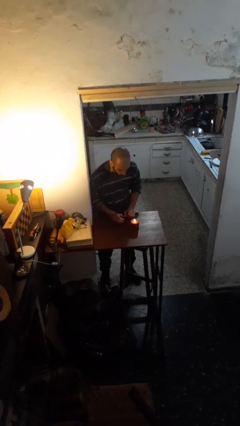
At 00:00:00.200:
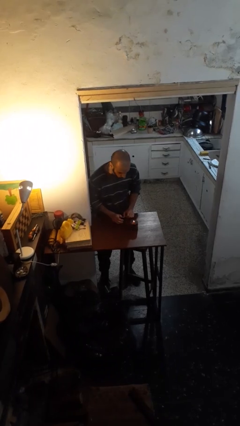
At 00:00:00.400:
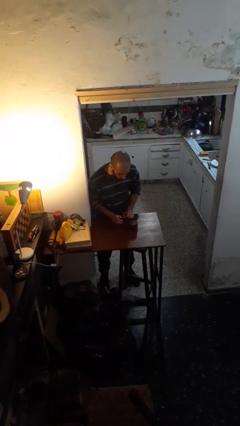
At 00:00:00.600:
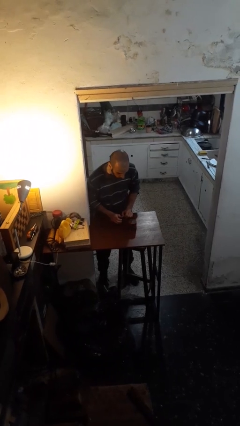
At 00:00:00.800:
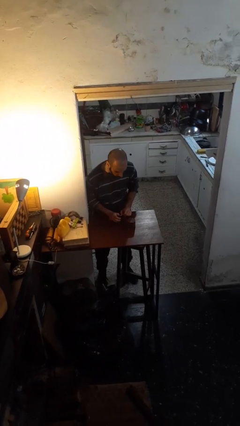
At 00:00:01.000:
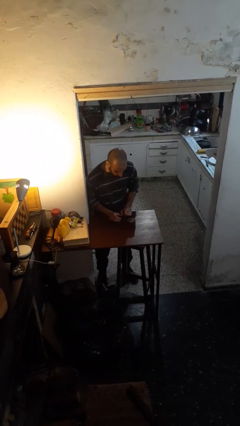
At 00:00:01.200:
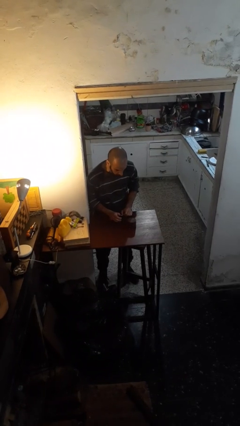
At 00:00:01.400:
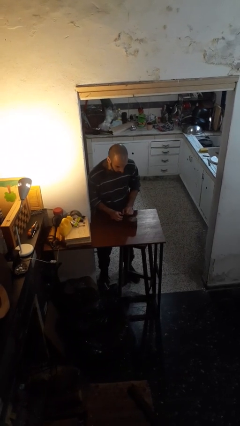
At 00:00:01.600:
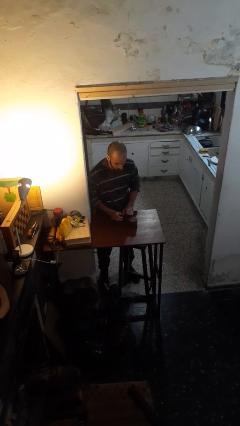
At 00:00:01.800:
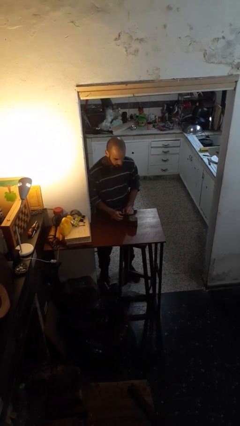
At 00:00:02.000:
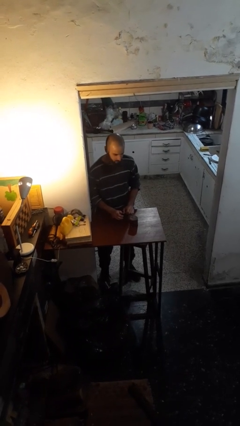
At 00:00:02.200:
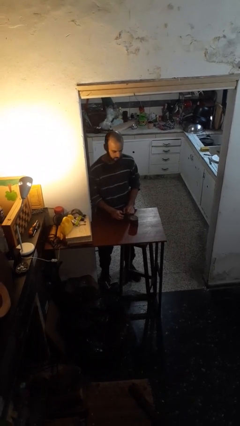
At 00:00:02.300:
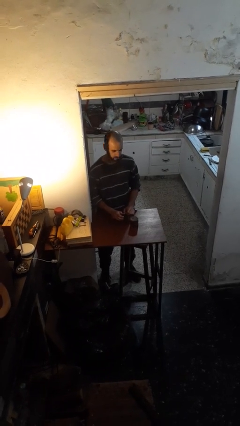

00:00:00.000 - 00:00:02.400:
person extinguishes candle

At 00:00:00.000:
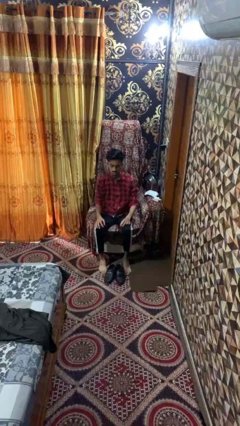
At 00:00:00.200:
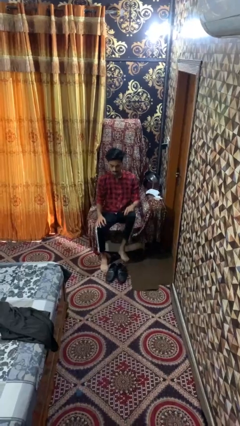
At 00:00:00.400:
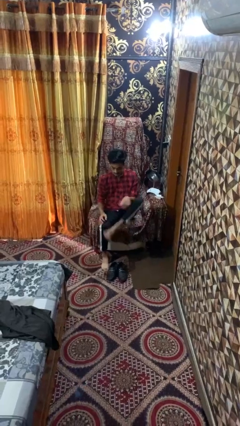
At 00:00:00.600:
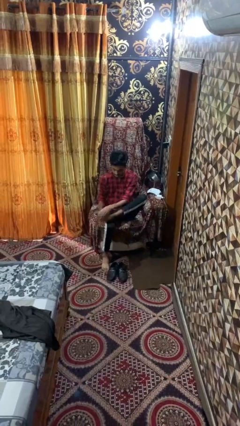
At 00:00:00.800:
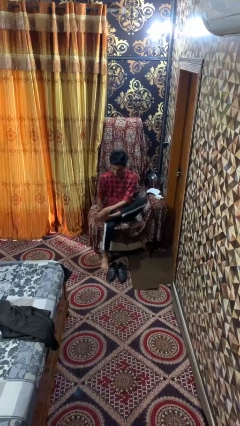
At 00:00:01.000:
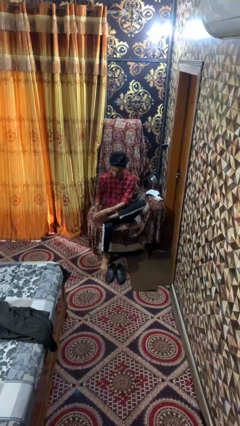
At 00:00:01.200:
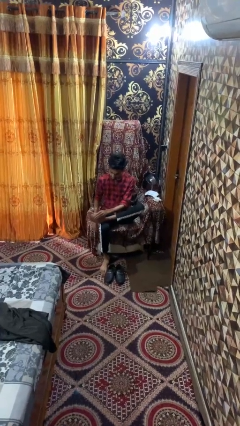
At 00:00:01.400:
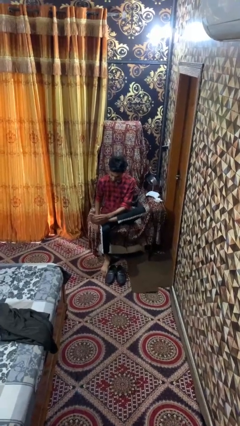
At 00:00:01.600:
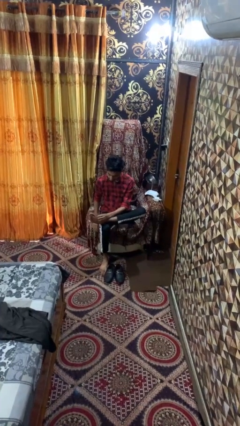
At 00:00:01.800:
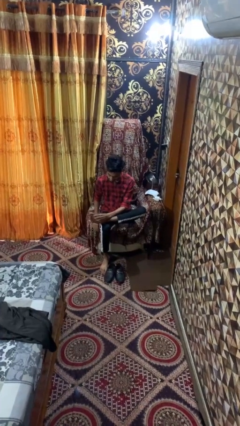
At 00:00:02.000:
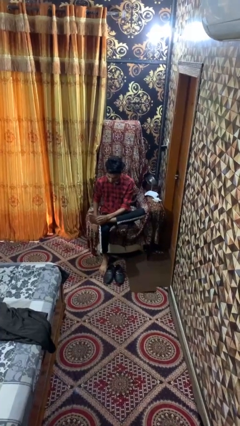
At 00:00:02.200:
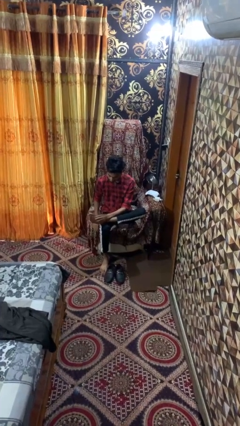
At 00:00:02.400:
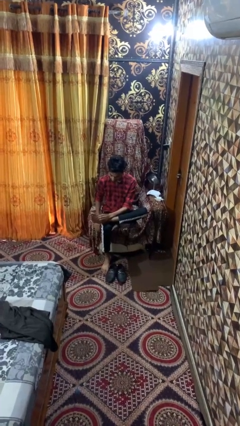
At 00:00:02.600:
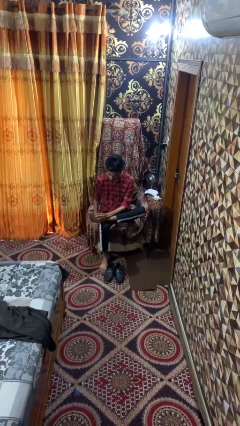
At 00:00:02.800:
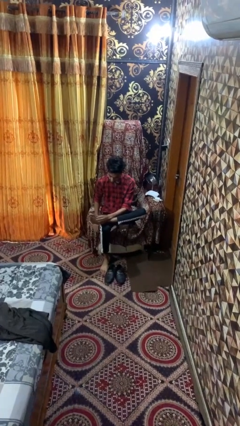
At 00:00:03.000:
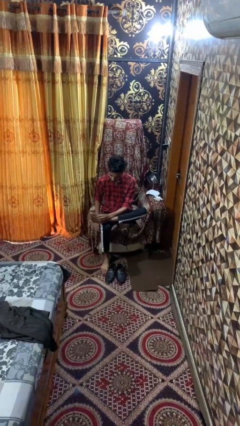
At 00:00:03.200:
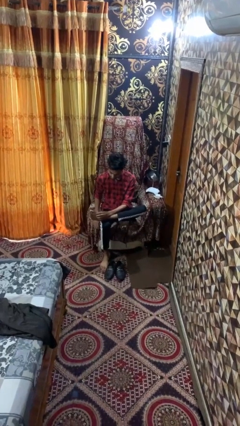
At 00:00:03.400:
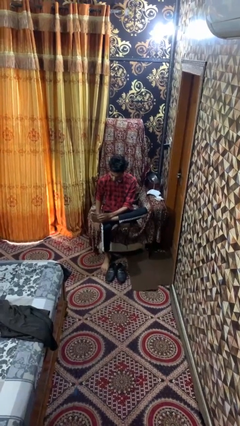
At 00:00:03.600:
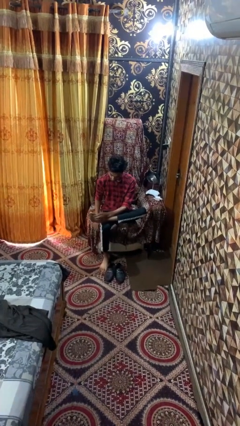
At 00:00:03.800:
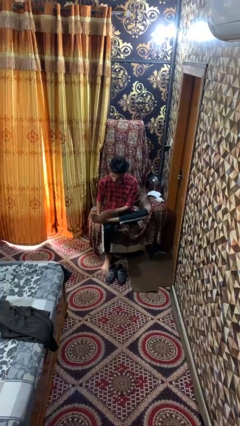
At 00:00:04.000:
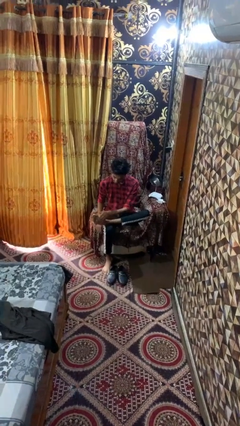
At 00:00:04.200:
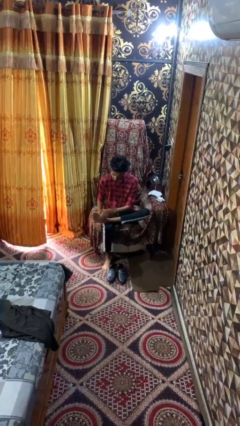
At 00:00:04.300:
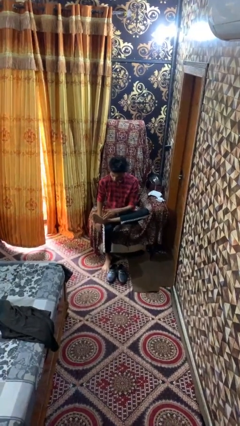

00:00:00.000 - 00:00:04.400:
person rubs foot

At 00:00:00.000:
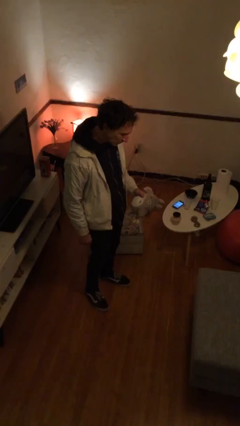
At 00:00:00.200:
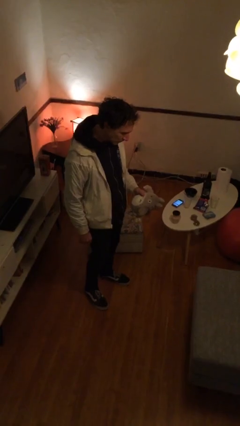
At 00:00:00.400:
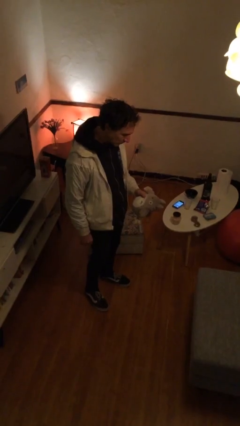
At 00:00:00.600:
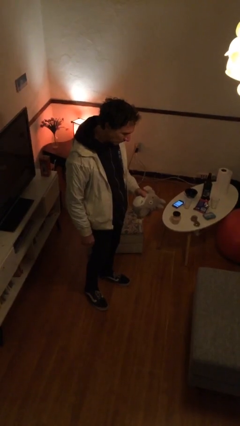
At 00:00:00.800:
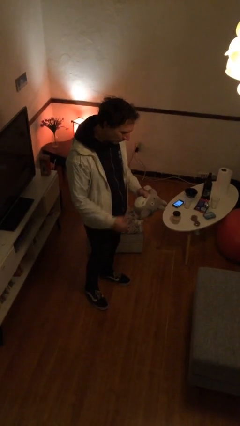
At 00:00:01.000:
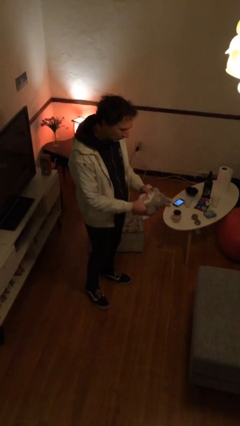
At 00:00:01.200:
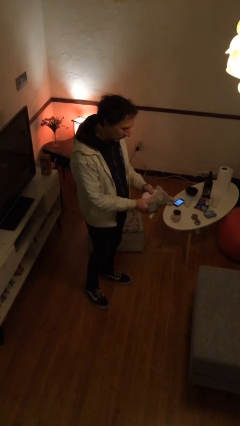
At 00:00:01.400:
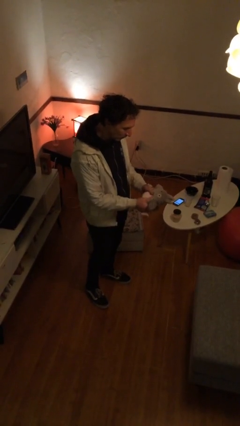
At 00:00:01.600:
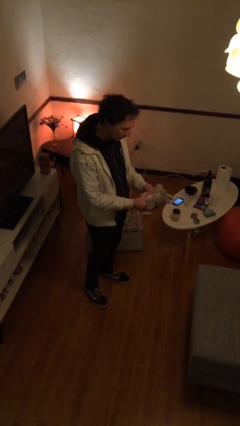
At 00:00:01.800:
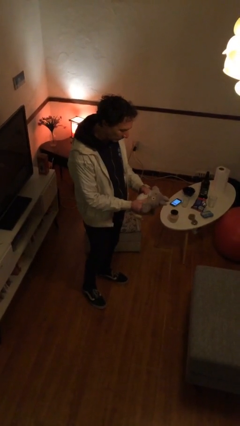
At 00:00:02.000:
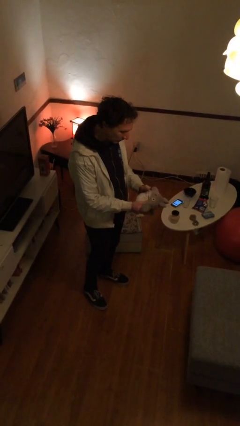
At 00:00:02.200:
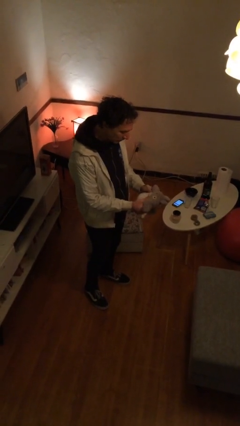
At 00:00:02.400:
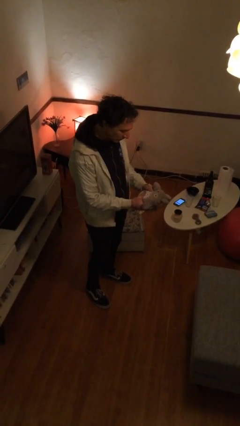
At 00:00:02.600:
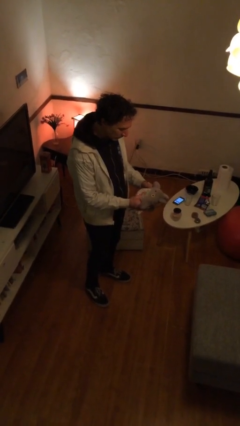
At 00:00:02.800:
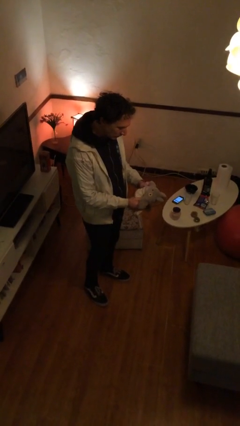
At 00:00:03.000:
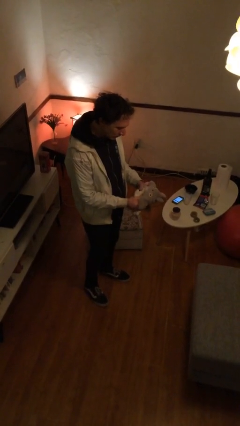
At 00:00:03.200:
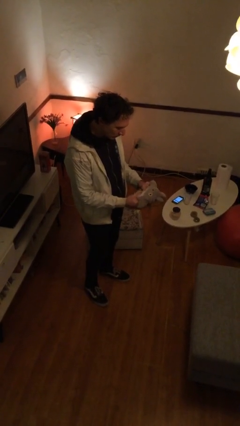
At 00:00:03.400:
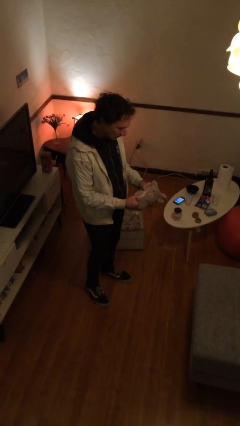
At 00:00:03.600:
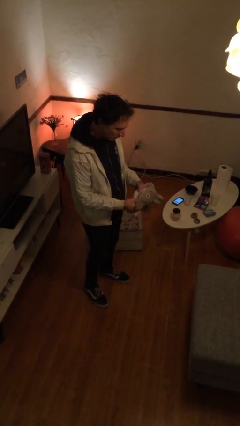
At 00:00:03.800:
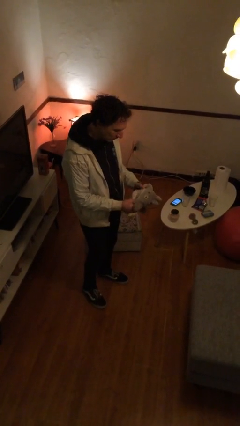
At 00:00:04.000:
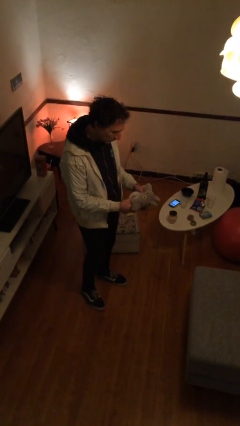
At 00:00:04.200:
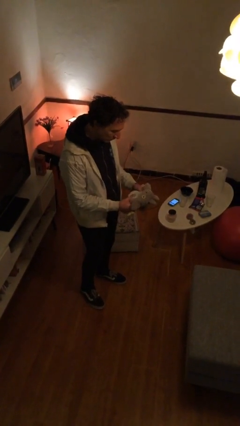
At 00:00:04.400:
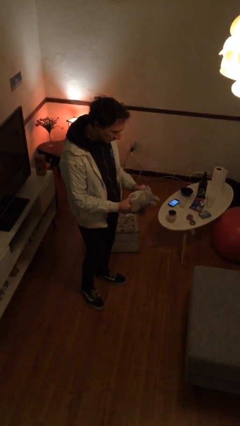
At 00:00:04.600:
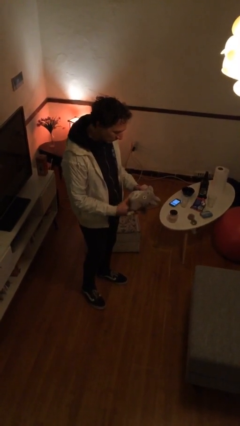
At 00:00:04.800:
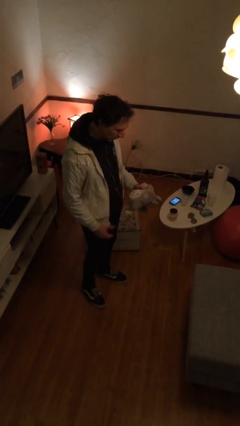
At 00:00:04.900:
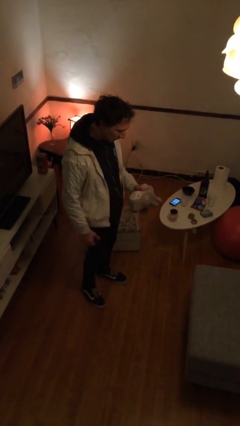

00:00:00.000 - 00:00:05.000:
person squeezes object

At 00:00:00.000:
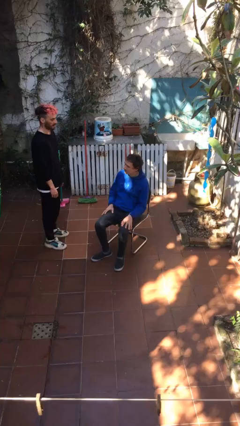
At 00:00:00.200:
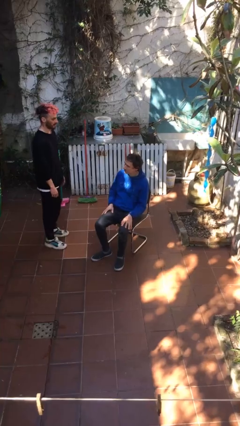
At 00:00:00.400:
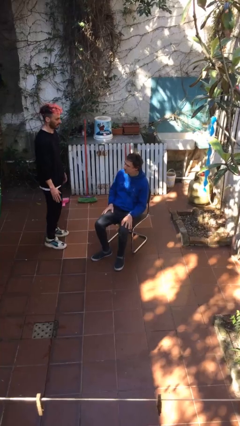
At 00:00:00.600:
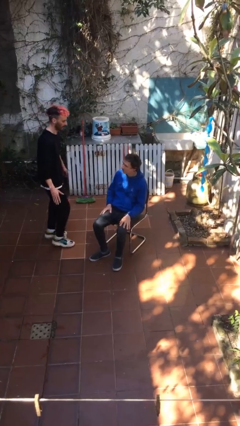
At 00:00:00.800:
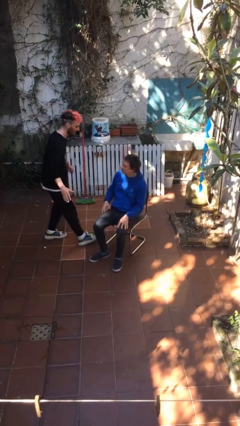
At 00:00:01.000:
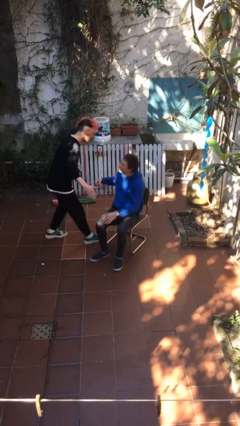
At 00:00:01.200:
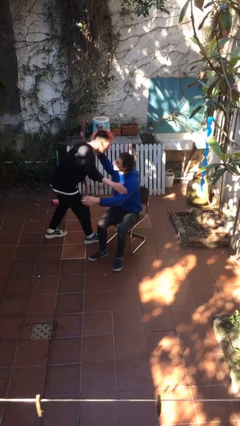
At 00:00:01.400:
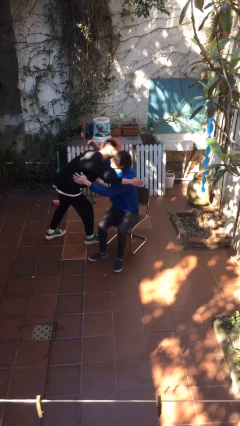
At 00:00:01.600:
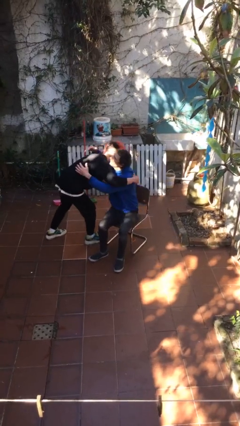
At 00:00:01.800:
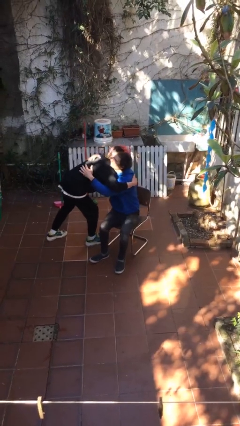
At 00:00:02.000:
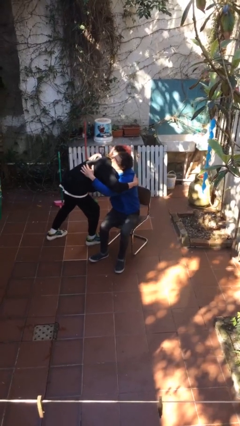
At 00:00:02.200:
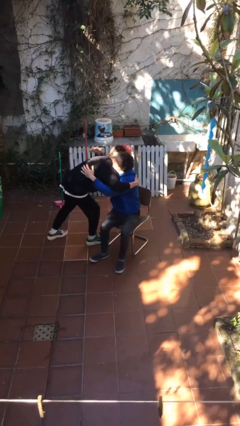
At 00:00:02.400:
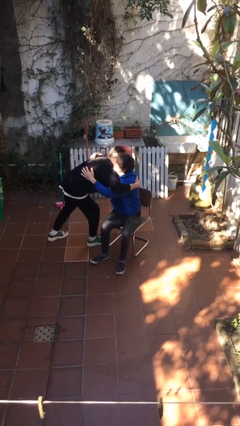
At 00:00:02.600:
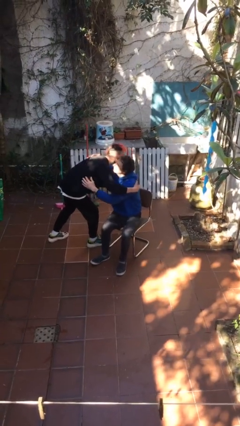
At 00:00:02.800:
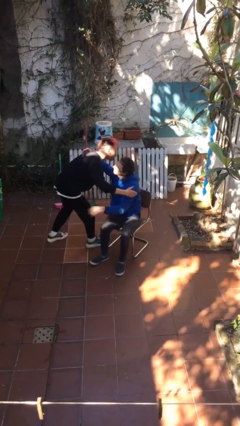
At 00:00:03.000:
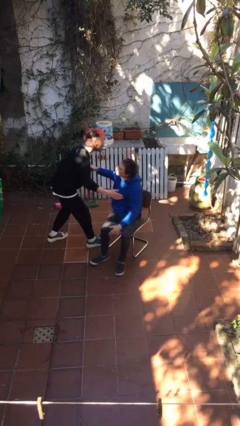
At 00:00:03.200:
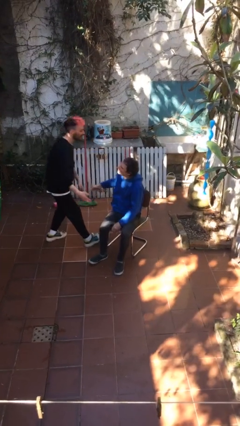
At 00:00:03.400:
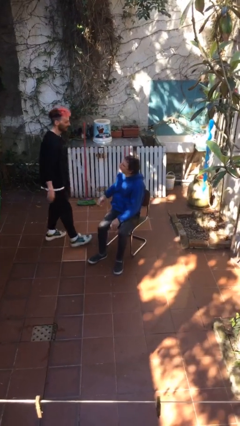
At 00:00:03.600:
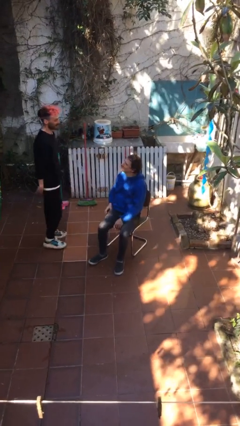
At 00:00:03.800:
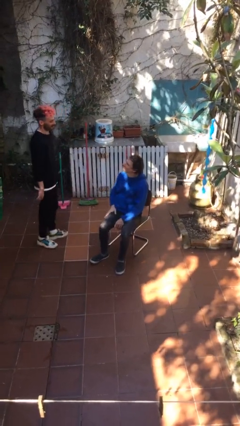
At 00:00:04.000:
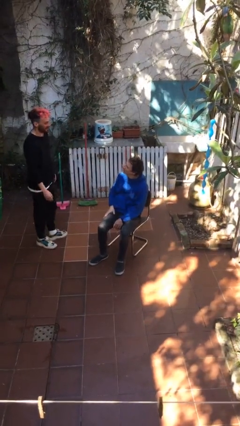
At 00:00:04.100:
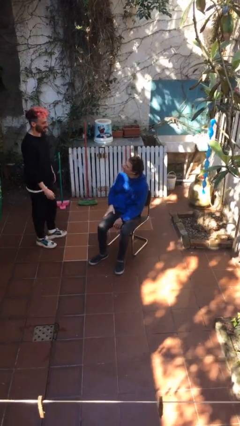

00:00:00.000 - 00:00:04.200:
person embraces person

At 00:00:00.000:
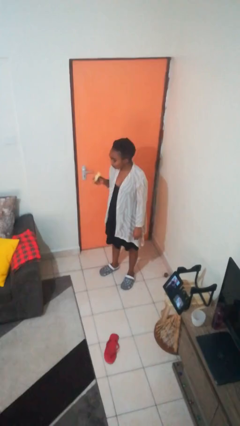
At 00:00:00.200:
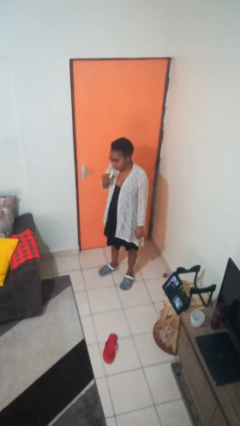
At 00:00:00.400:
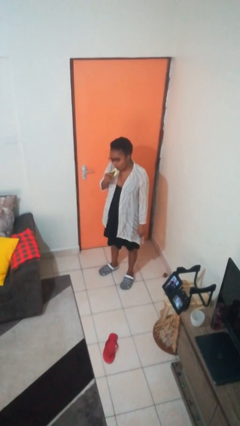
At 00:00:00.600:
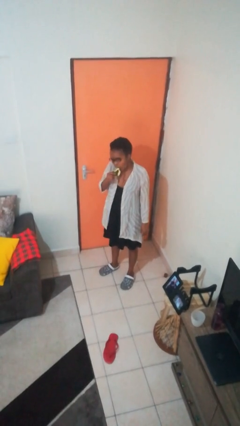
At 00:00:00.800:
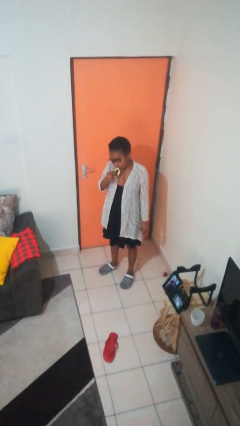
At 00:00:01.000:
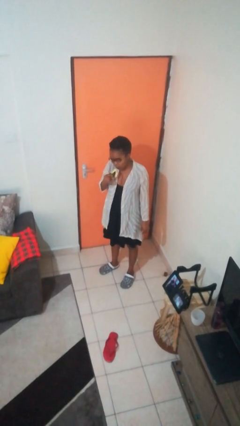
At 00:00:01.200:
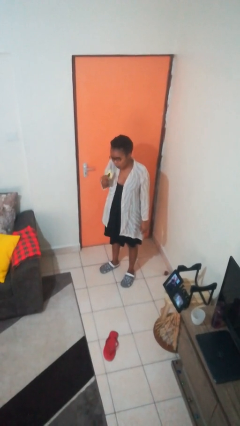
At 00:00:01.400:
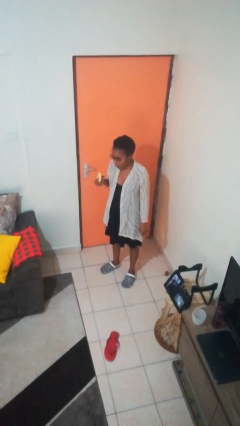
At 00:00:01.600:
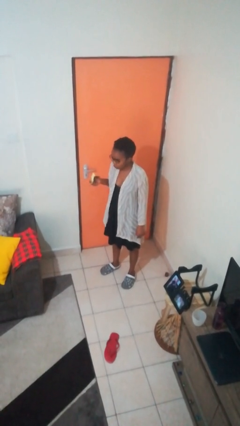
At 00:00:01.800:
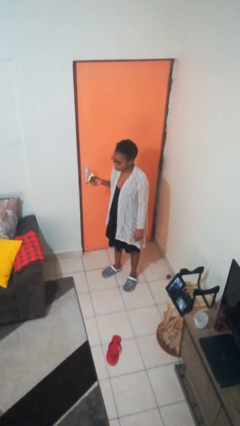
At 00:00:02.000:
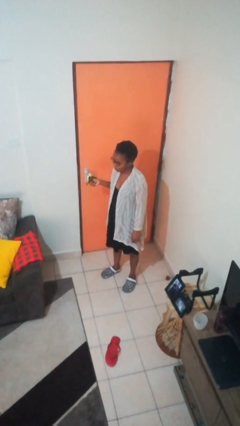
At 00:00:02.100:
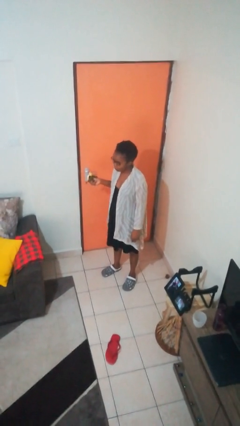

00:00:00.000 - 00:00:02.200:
person eats banana
